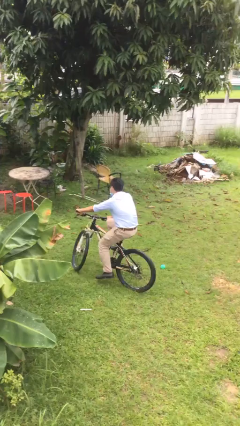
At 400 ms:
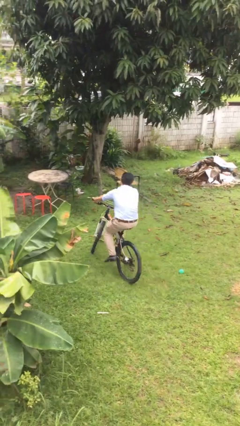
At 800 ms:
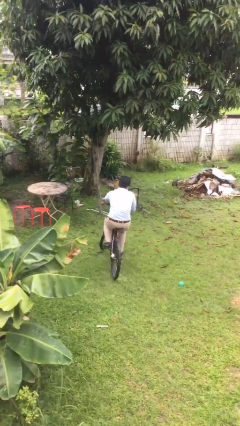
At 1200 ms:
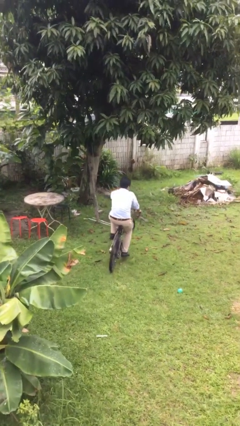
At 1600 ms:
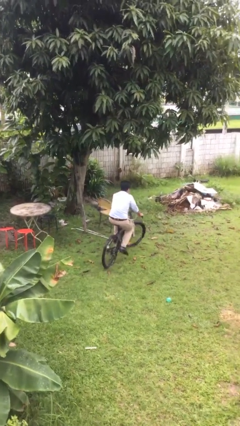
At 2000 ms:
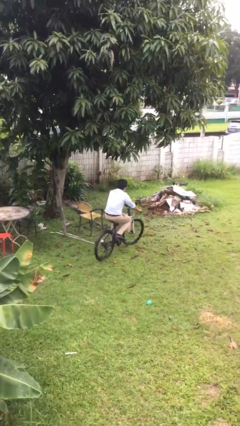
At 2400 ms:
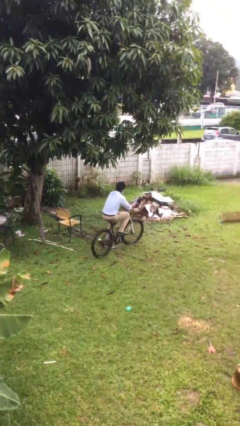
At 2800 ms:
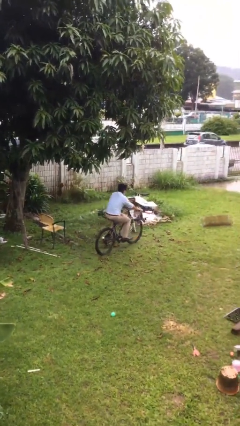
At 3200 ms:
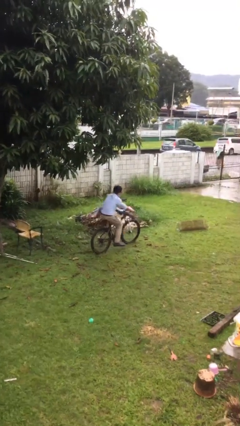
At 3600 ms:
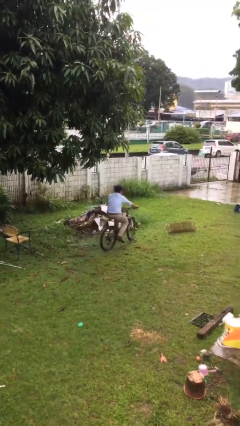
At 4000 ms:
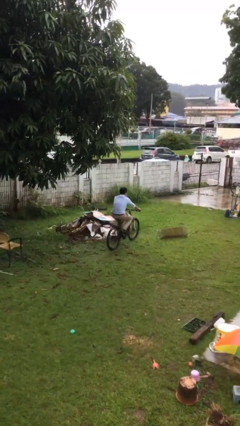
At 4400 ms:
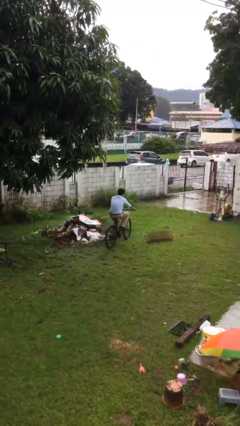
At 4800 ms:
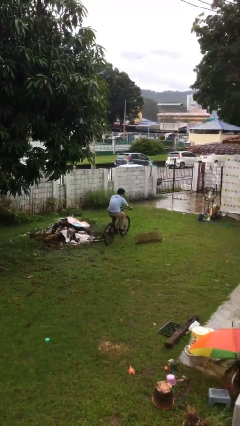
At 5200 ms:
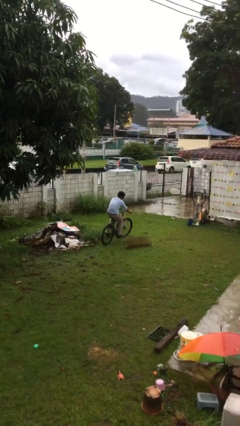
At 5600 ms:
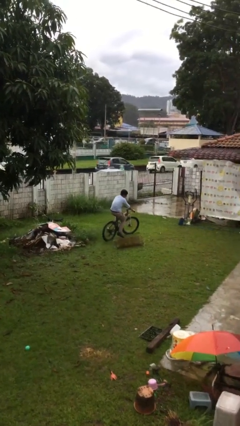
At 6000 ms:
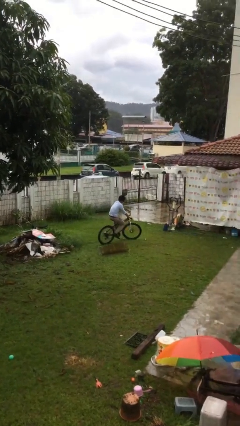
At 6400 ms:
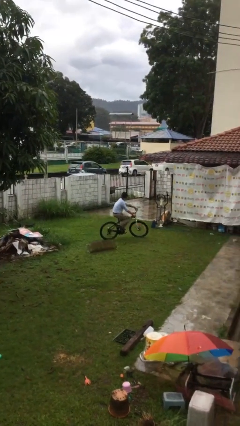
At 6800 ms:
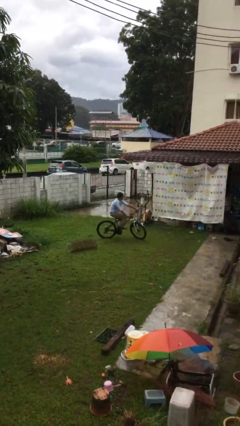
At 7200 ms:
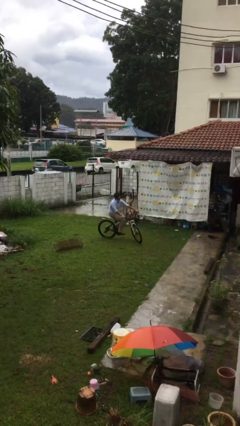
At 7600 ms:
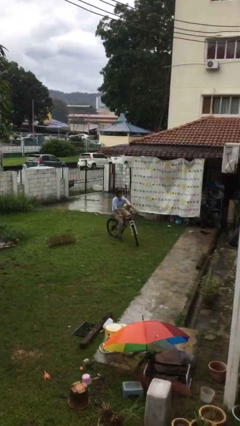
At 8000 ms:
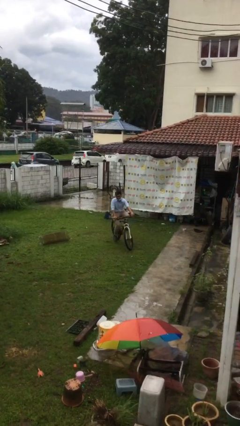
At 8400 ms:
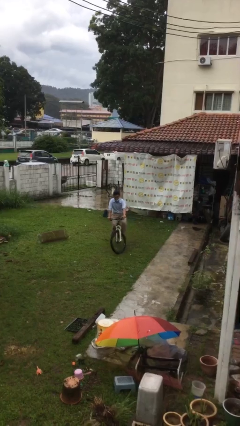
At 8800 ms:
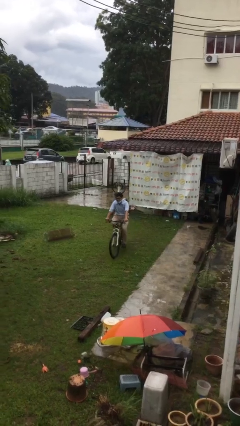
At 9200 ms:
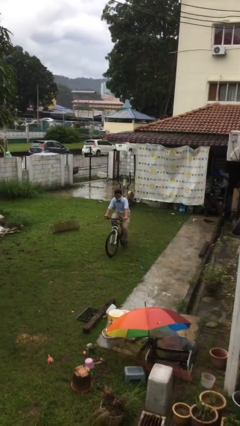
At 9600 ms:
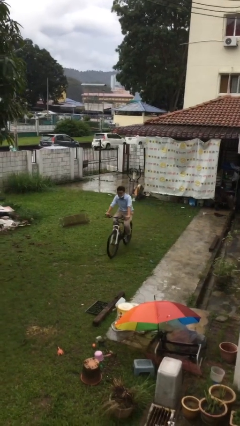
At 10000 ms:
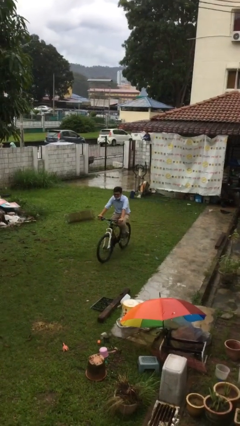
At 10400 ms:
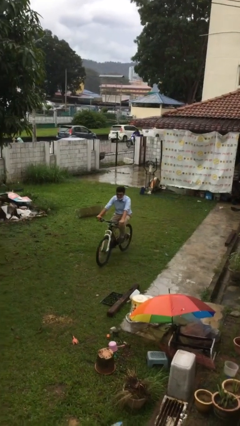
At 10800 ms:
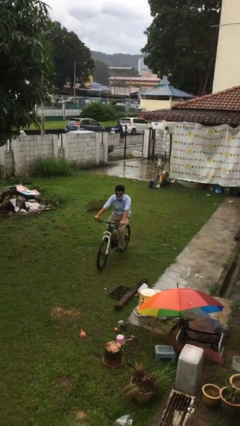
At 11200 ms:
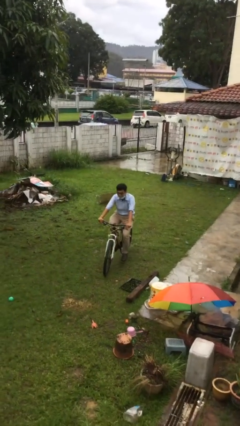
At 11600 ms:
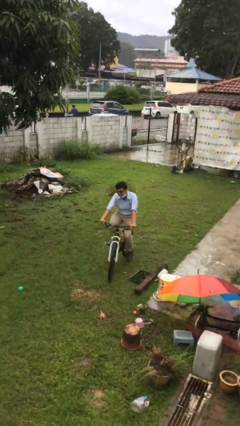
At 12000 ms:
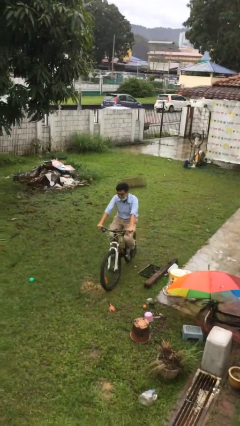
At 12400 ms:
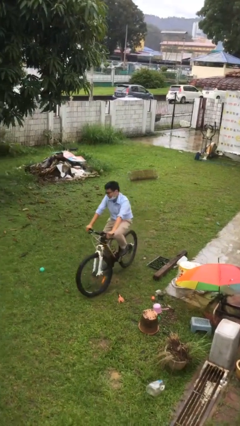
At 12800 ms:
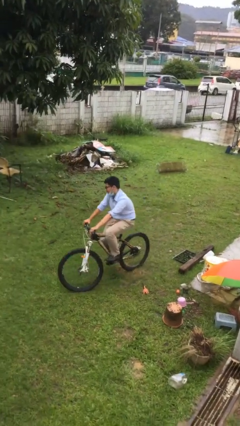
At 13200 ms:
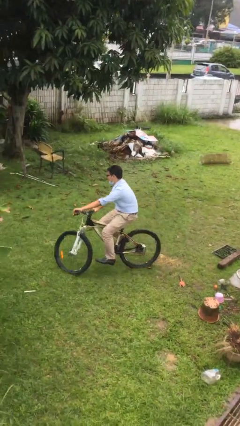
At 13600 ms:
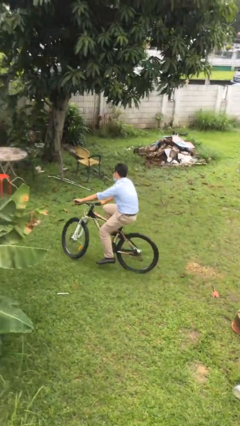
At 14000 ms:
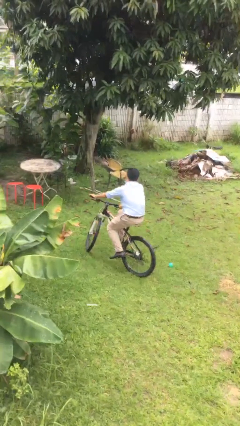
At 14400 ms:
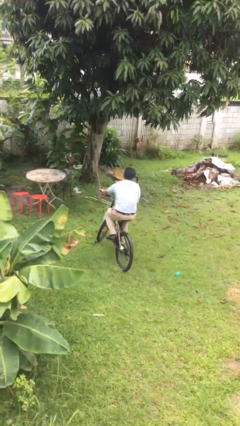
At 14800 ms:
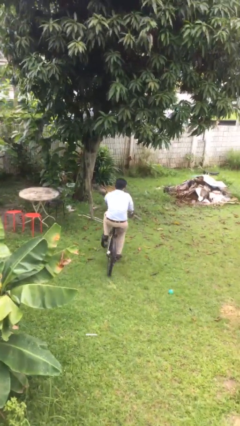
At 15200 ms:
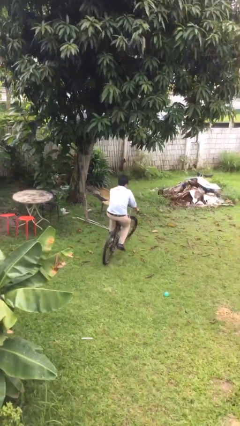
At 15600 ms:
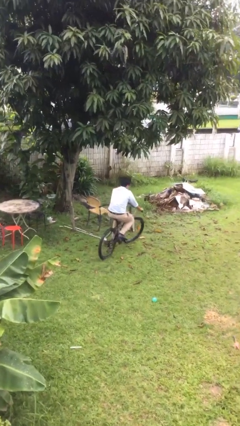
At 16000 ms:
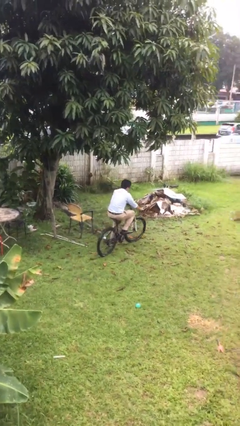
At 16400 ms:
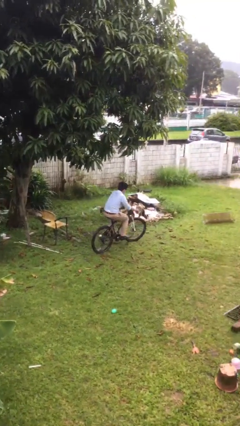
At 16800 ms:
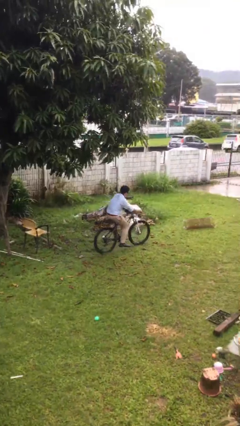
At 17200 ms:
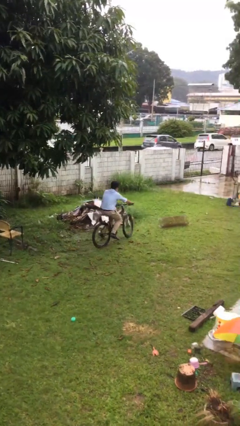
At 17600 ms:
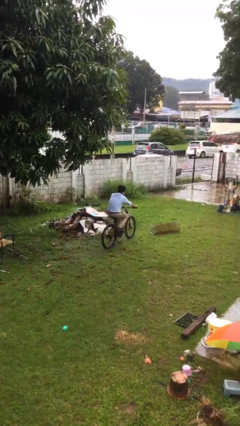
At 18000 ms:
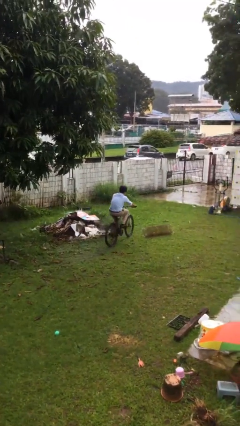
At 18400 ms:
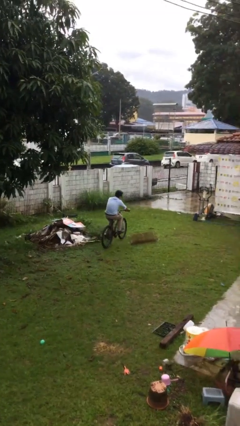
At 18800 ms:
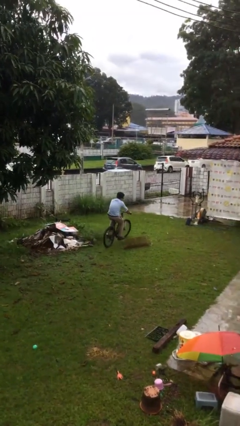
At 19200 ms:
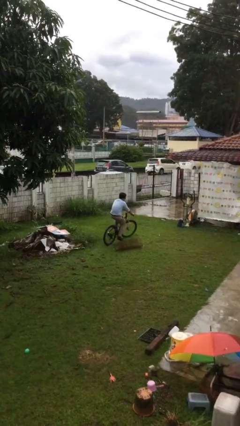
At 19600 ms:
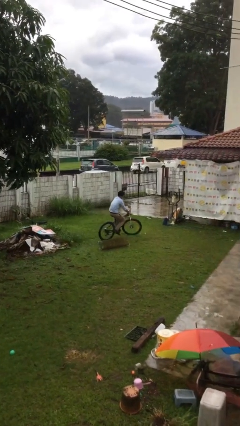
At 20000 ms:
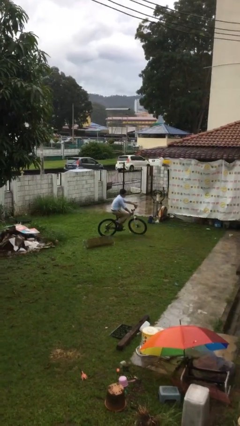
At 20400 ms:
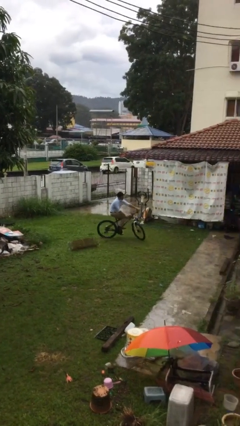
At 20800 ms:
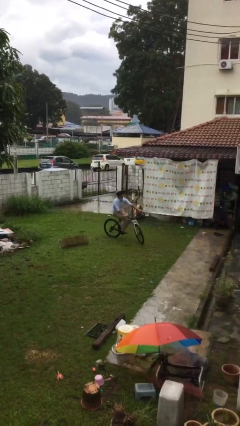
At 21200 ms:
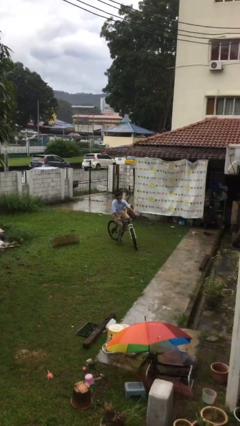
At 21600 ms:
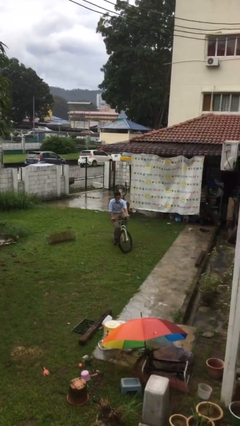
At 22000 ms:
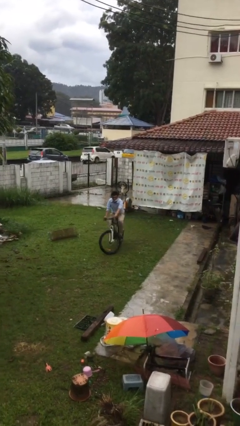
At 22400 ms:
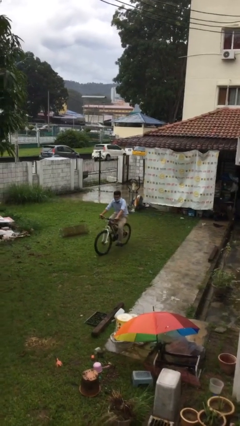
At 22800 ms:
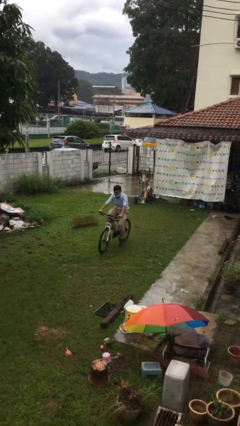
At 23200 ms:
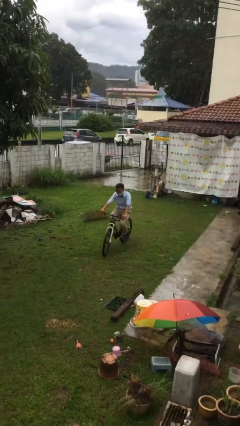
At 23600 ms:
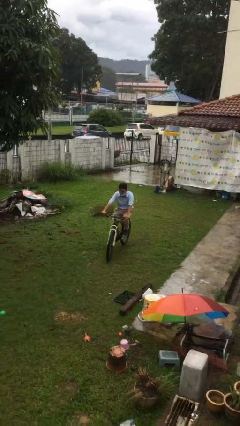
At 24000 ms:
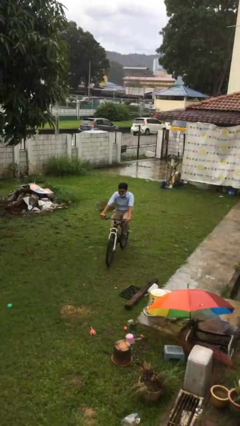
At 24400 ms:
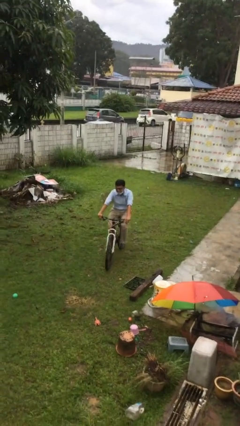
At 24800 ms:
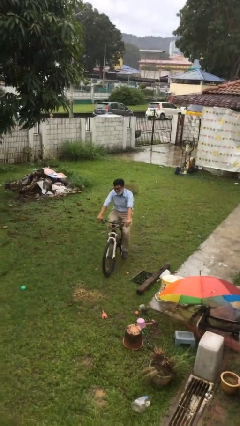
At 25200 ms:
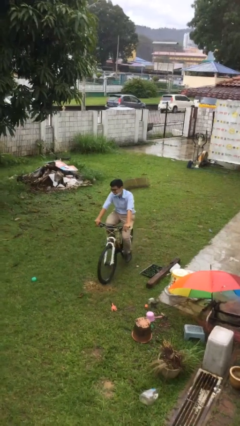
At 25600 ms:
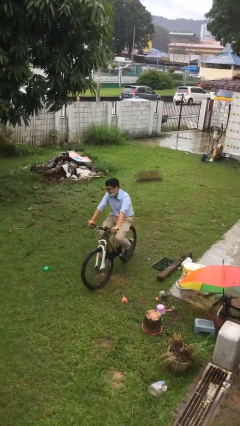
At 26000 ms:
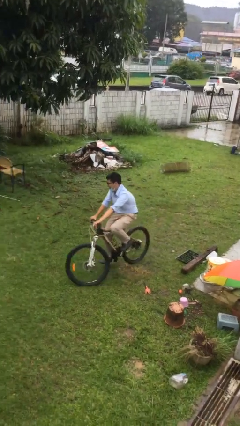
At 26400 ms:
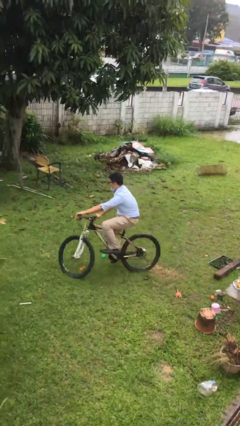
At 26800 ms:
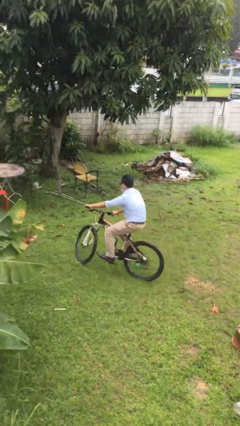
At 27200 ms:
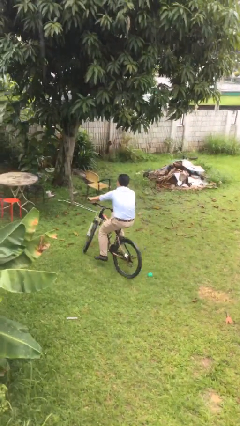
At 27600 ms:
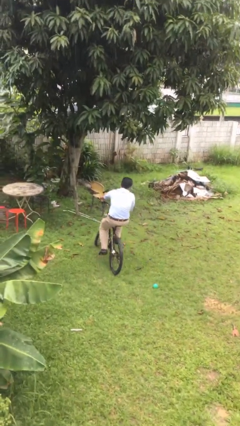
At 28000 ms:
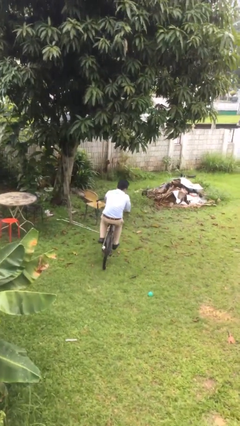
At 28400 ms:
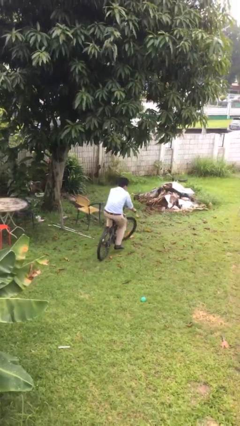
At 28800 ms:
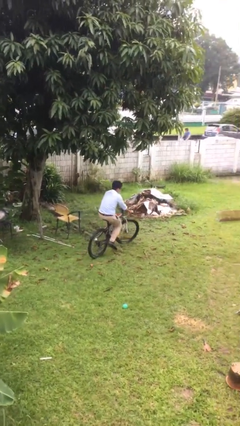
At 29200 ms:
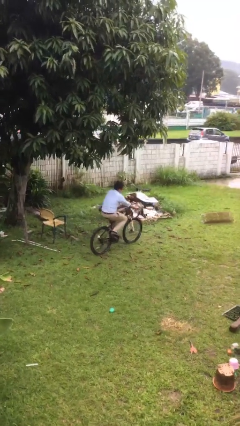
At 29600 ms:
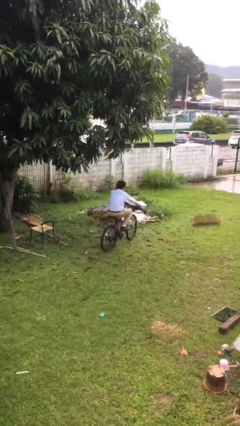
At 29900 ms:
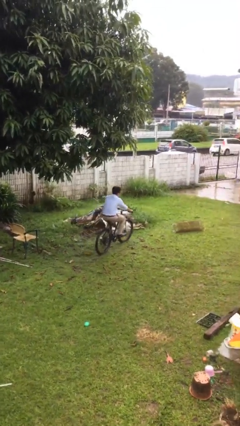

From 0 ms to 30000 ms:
person rides bicycle

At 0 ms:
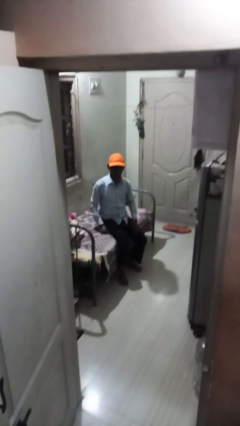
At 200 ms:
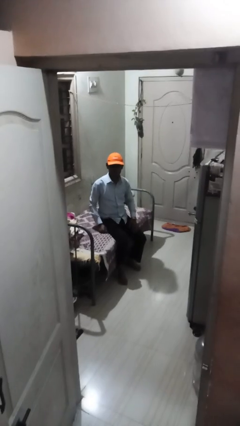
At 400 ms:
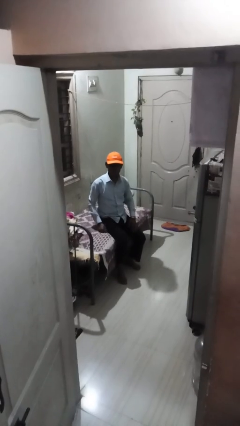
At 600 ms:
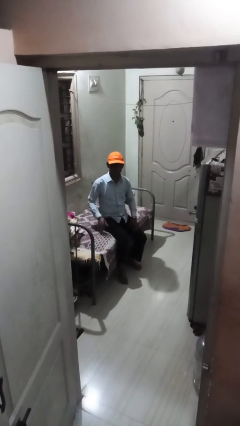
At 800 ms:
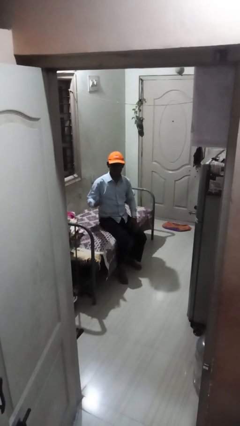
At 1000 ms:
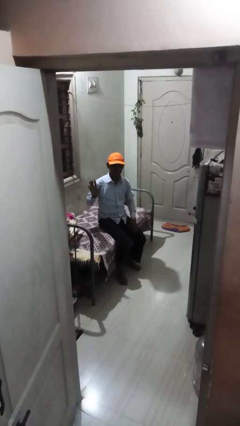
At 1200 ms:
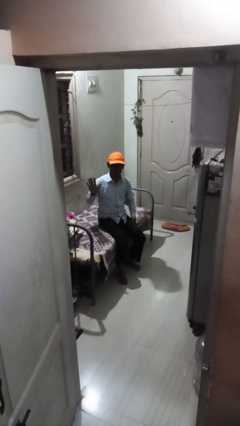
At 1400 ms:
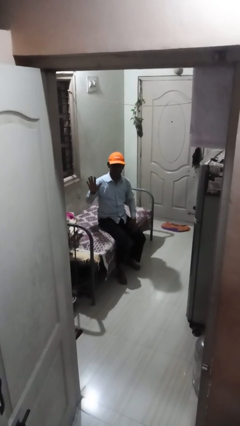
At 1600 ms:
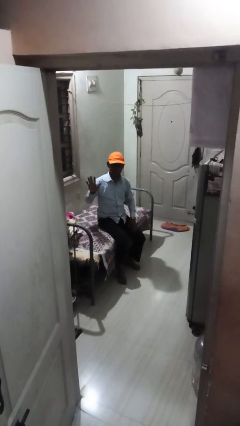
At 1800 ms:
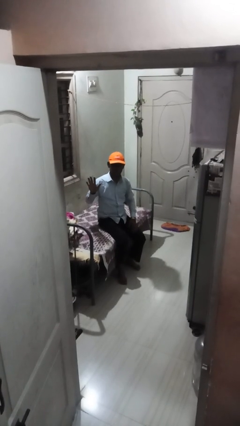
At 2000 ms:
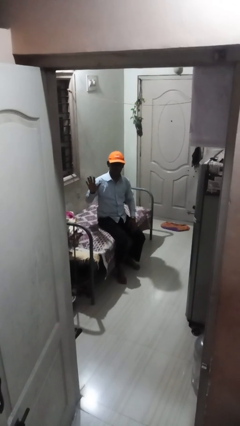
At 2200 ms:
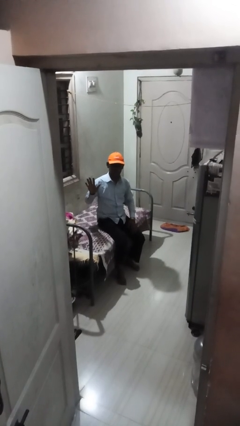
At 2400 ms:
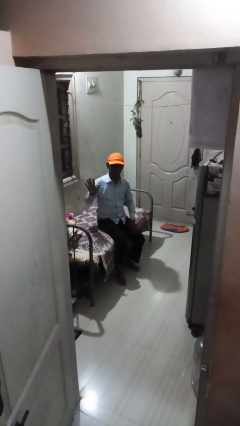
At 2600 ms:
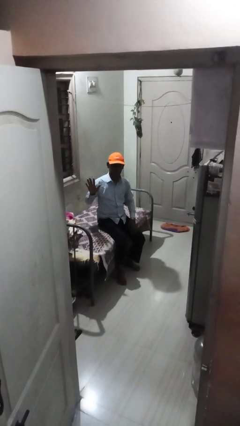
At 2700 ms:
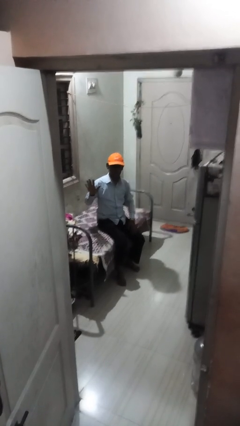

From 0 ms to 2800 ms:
person gestures number five

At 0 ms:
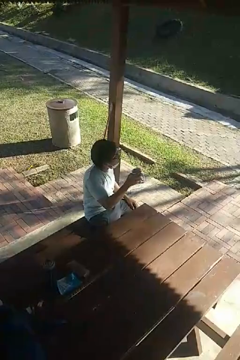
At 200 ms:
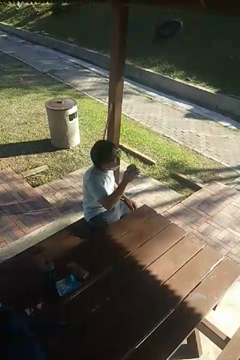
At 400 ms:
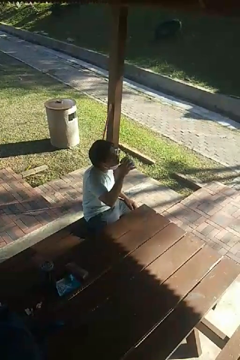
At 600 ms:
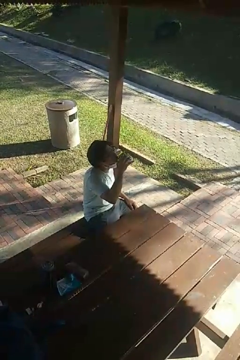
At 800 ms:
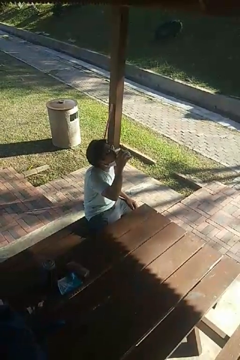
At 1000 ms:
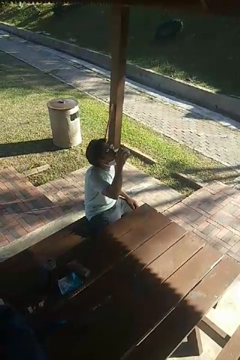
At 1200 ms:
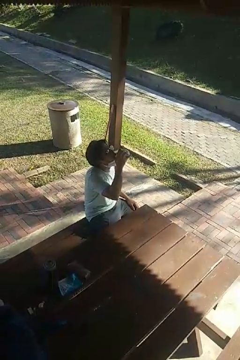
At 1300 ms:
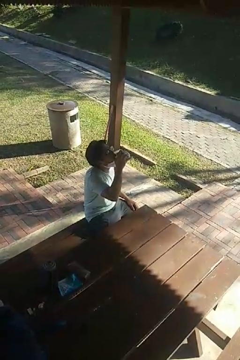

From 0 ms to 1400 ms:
person drinks from mug
